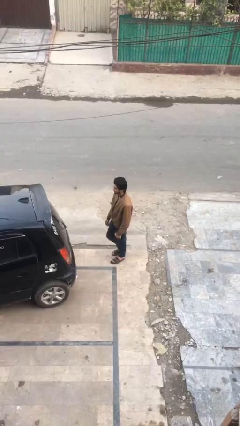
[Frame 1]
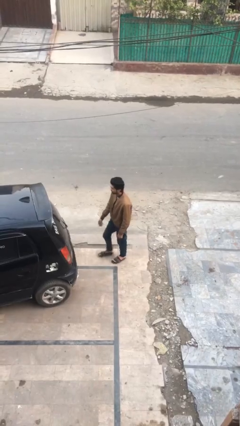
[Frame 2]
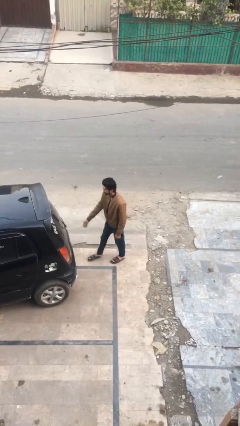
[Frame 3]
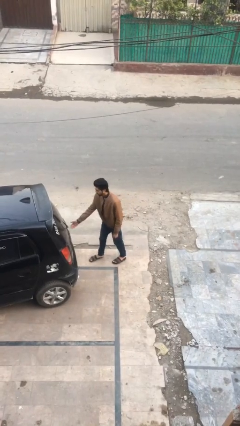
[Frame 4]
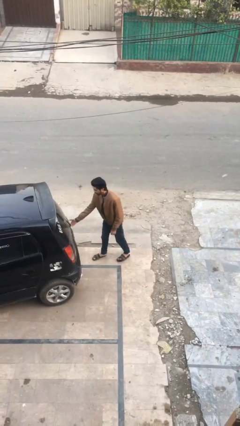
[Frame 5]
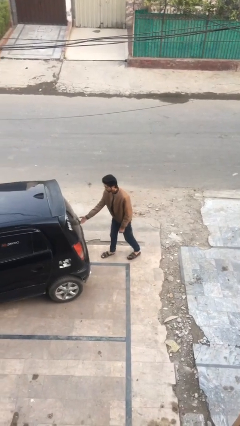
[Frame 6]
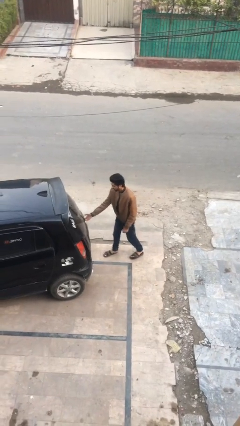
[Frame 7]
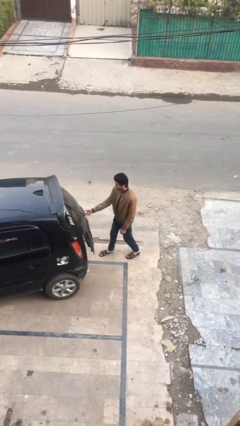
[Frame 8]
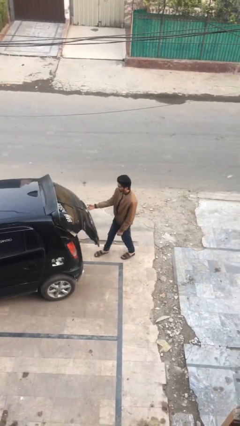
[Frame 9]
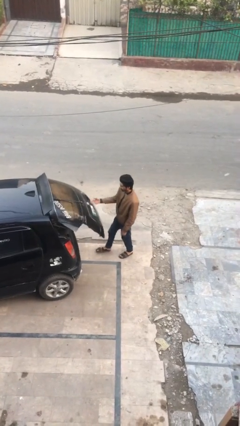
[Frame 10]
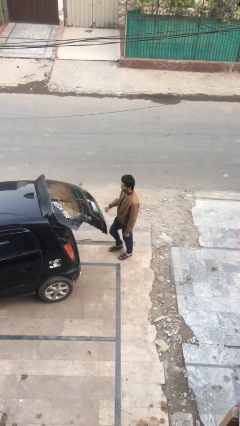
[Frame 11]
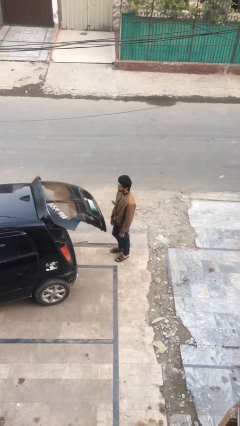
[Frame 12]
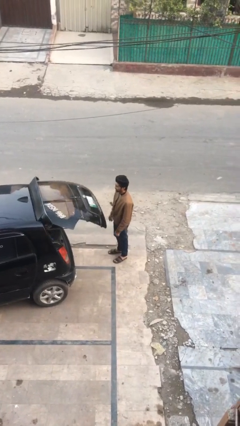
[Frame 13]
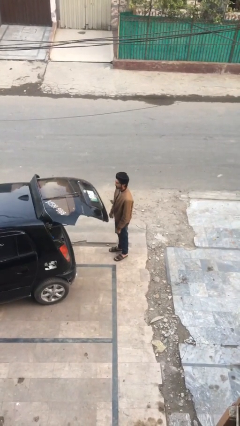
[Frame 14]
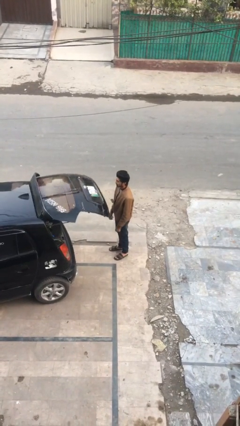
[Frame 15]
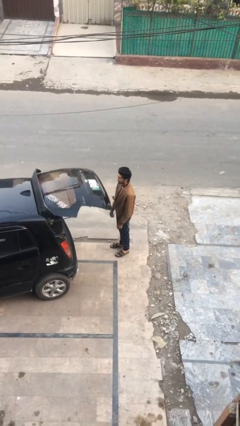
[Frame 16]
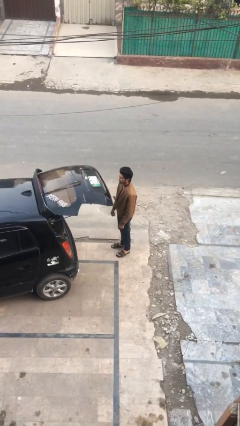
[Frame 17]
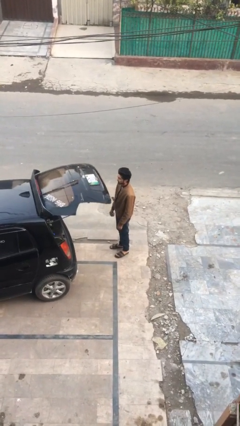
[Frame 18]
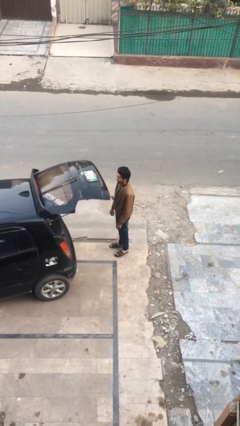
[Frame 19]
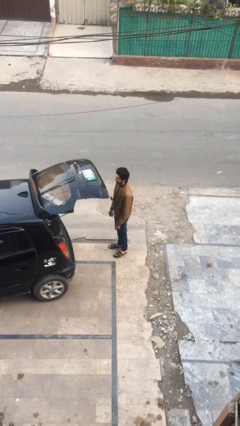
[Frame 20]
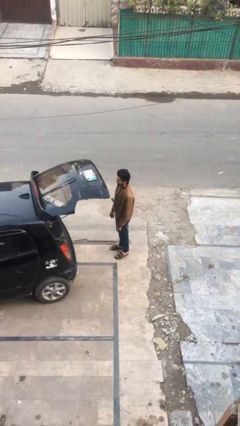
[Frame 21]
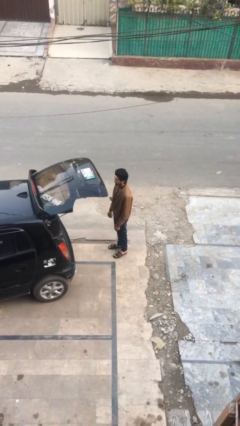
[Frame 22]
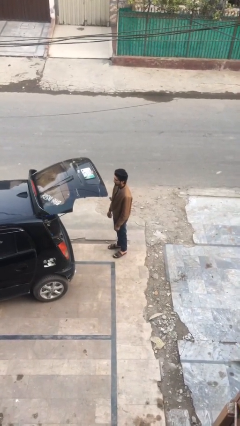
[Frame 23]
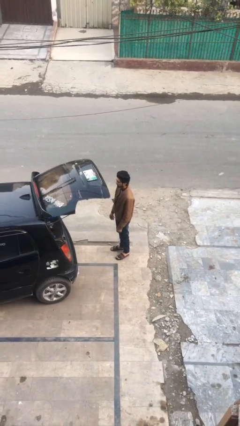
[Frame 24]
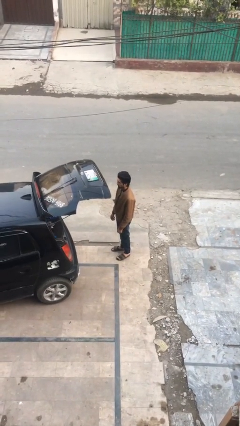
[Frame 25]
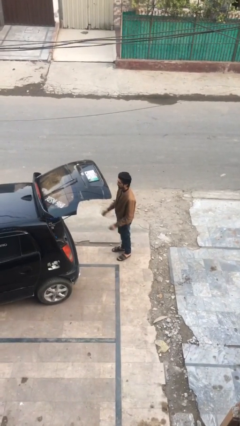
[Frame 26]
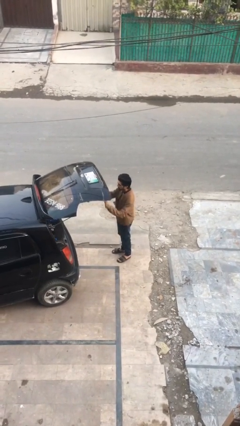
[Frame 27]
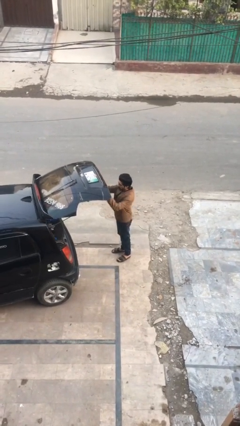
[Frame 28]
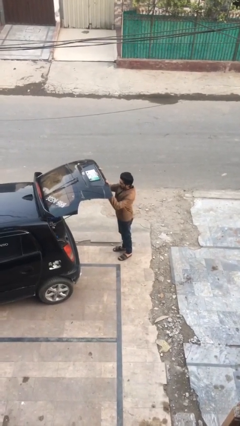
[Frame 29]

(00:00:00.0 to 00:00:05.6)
person opens car trunk

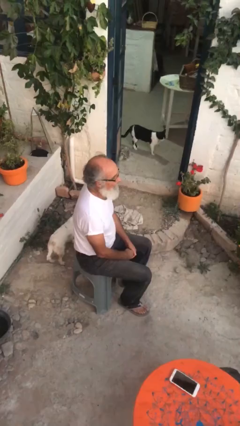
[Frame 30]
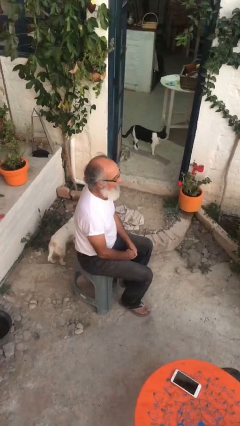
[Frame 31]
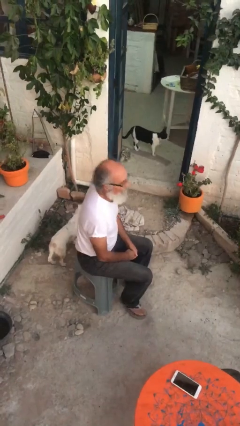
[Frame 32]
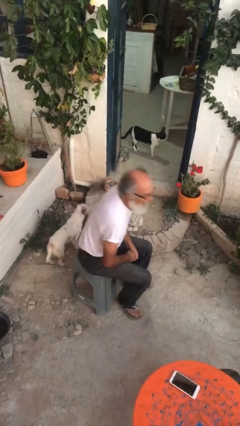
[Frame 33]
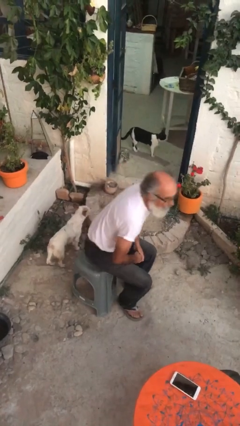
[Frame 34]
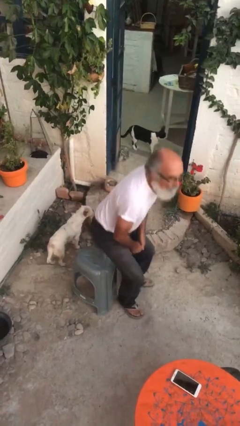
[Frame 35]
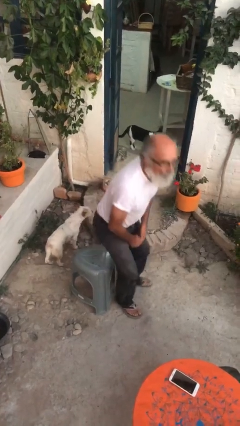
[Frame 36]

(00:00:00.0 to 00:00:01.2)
person stands up

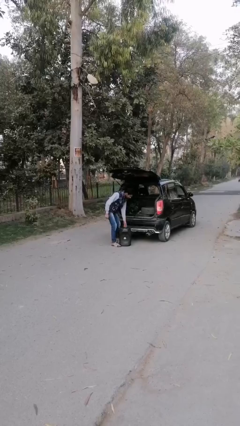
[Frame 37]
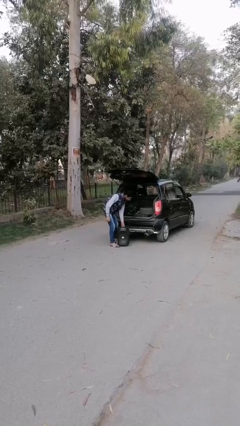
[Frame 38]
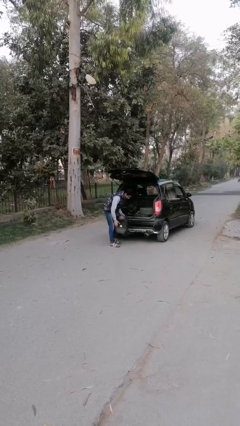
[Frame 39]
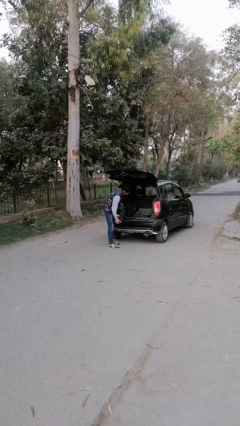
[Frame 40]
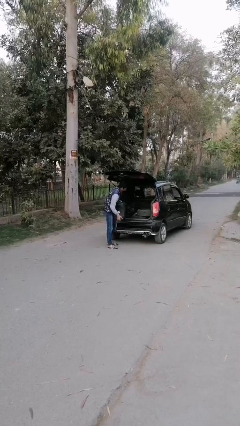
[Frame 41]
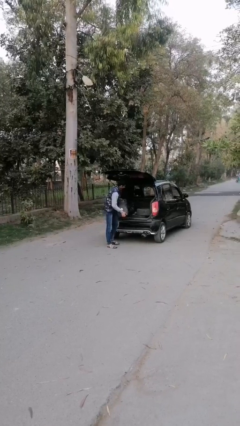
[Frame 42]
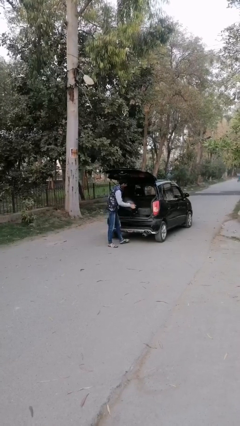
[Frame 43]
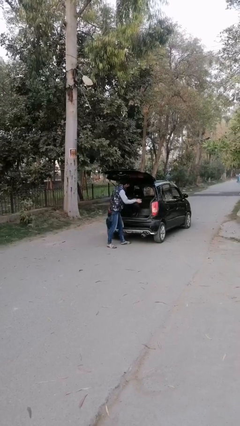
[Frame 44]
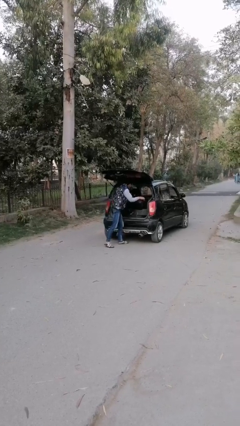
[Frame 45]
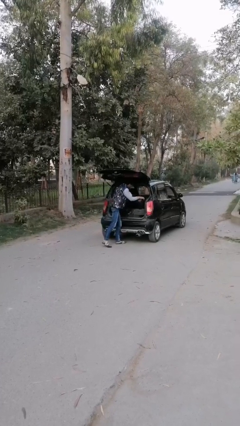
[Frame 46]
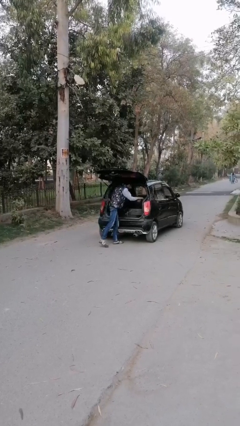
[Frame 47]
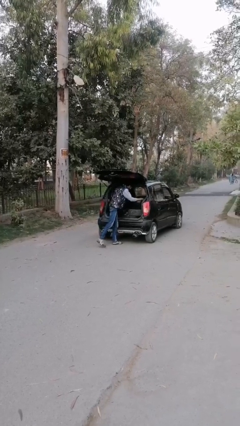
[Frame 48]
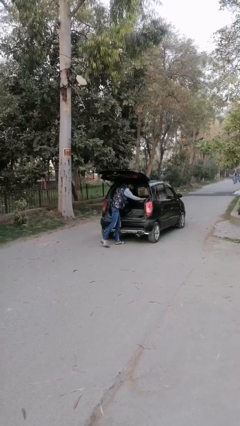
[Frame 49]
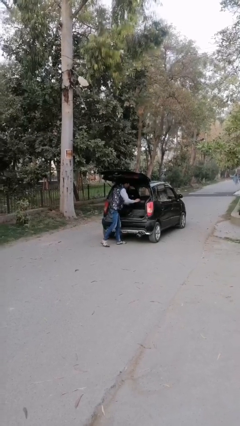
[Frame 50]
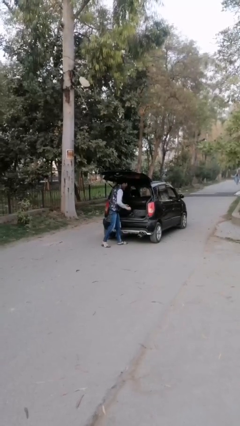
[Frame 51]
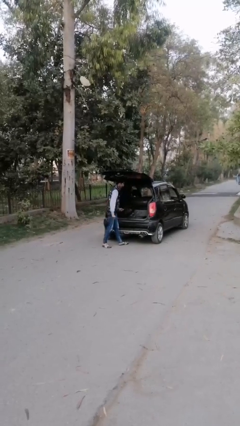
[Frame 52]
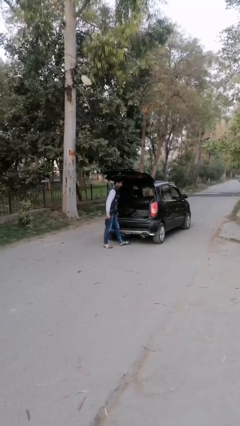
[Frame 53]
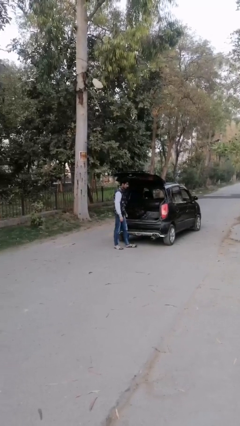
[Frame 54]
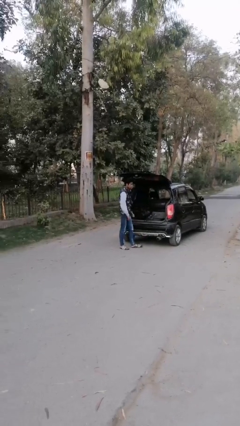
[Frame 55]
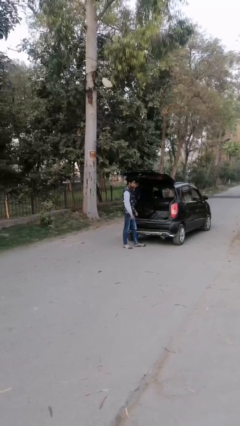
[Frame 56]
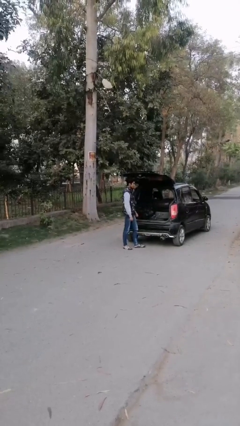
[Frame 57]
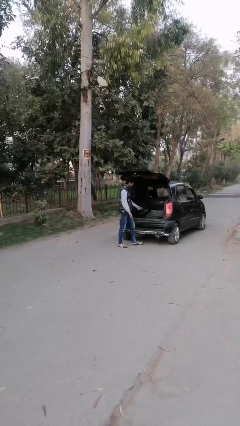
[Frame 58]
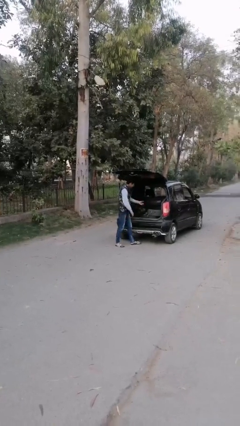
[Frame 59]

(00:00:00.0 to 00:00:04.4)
person loads car

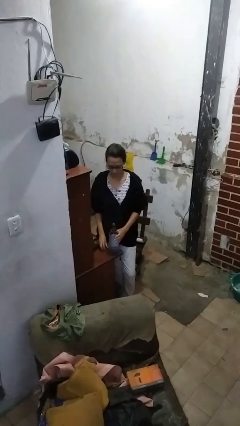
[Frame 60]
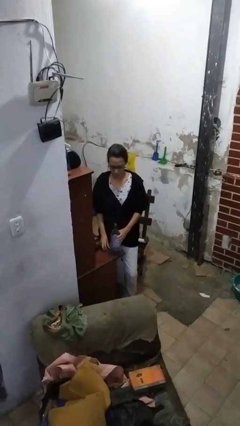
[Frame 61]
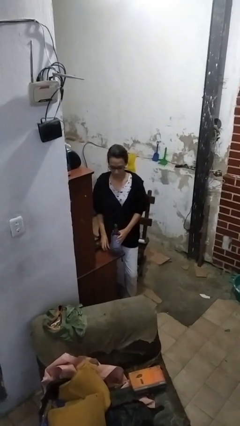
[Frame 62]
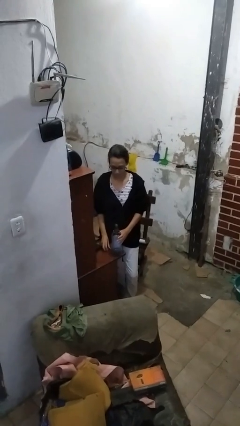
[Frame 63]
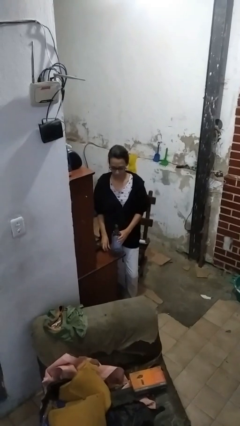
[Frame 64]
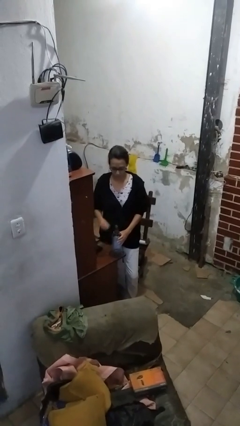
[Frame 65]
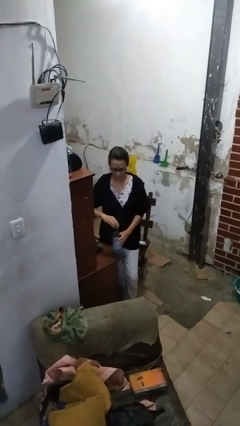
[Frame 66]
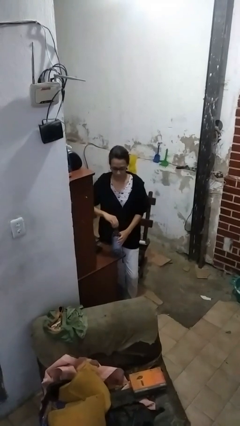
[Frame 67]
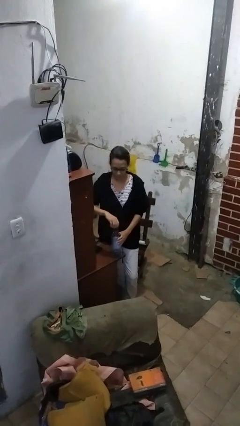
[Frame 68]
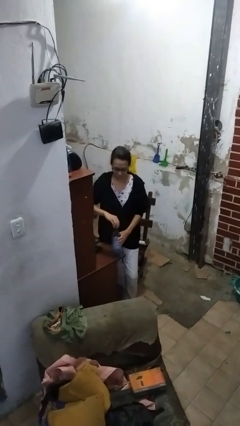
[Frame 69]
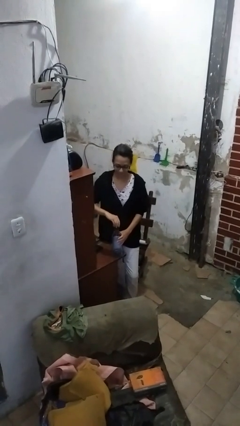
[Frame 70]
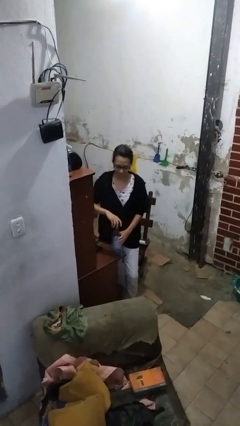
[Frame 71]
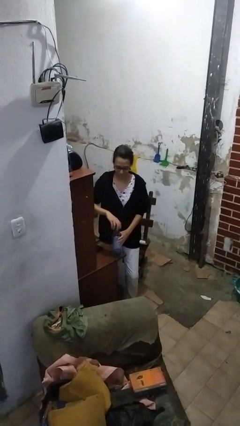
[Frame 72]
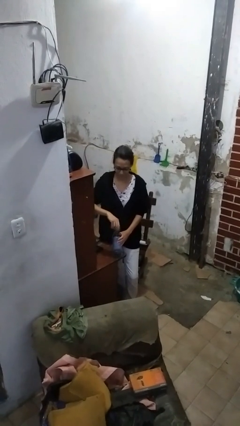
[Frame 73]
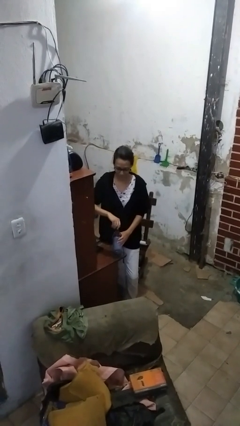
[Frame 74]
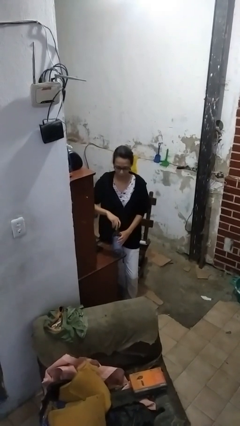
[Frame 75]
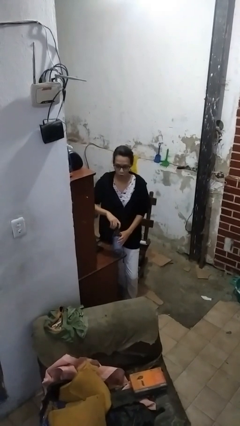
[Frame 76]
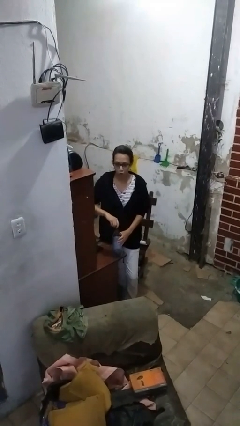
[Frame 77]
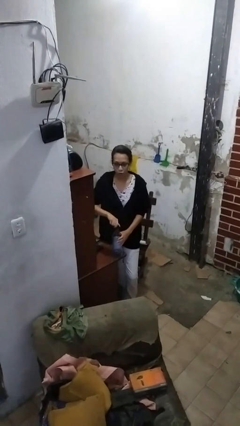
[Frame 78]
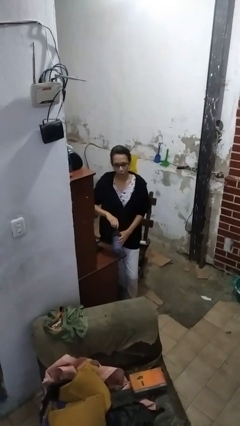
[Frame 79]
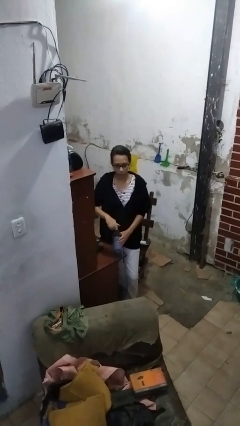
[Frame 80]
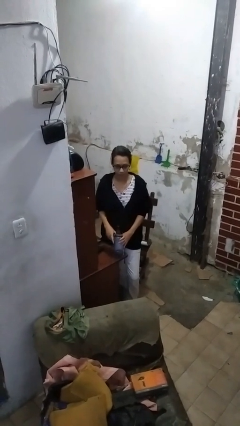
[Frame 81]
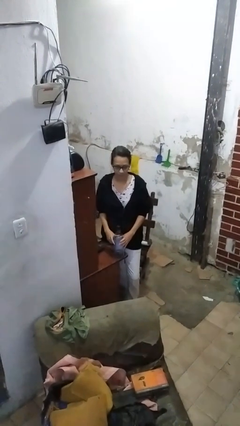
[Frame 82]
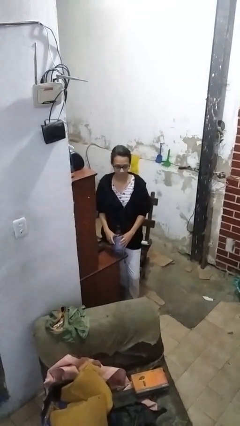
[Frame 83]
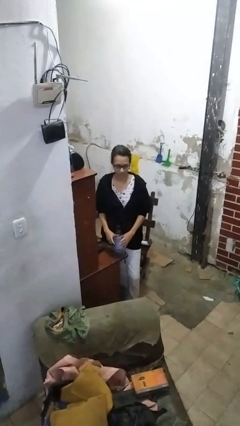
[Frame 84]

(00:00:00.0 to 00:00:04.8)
person screws lid to bottle

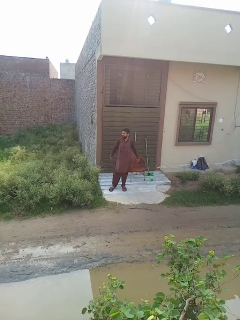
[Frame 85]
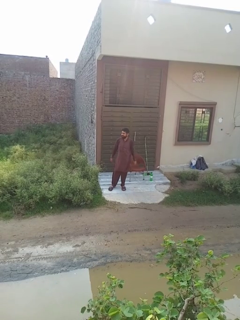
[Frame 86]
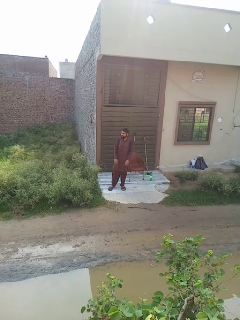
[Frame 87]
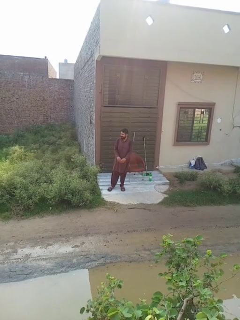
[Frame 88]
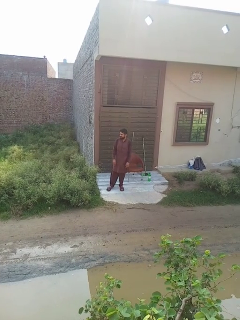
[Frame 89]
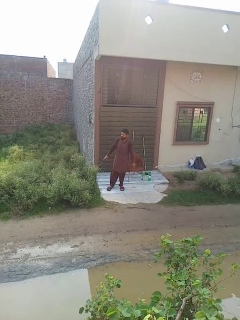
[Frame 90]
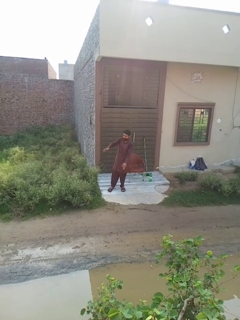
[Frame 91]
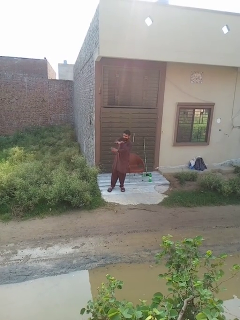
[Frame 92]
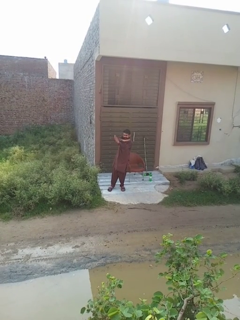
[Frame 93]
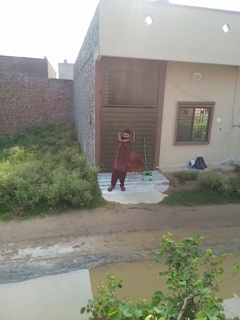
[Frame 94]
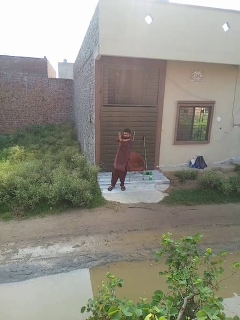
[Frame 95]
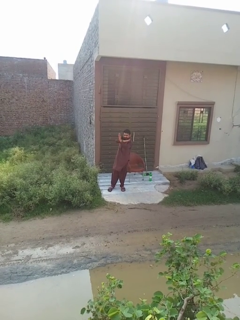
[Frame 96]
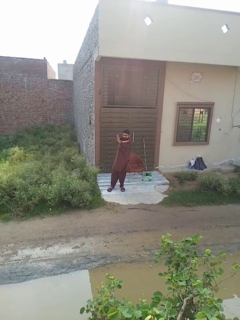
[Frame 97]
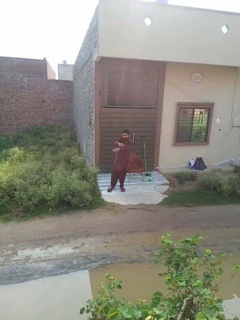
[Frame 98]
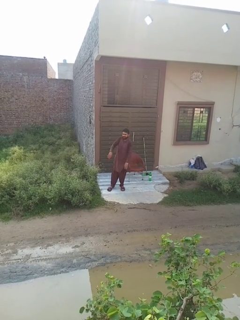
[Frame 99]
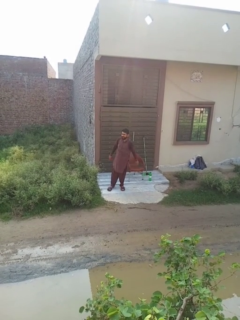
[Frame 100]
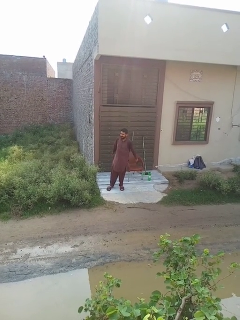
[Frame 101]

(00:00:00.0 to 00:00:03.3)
person crosses arms
